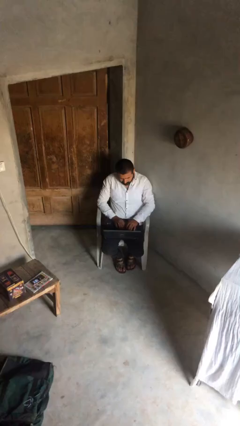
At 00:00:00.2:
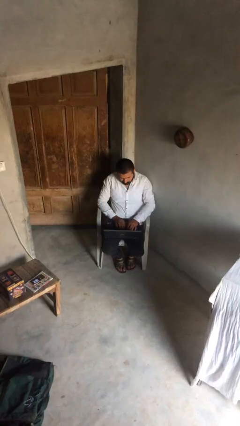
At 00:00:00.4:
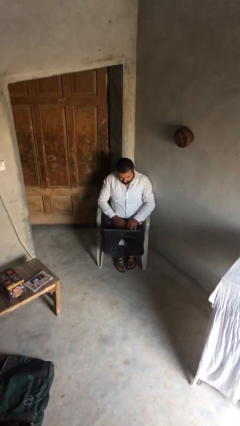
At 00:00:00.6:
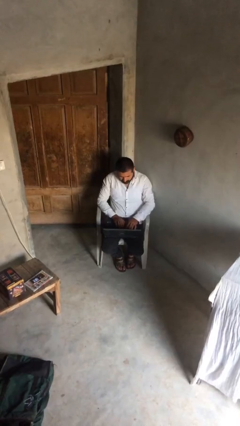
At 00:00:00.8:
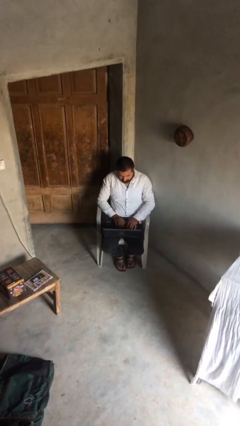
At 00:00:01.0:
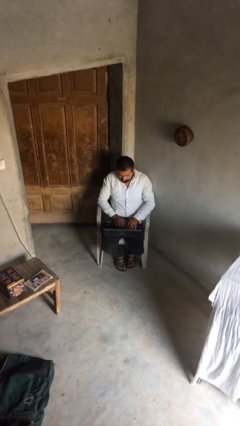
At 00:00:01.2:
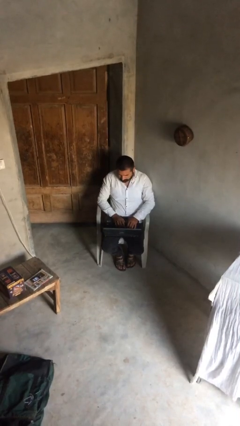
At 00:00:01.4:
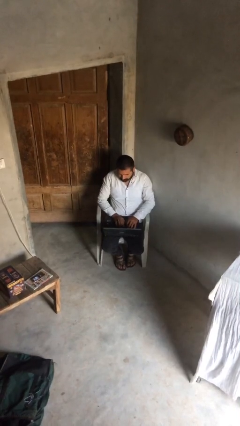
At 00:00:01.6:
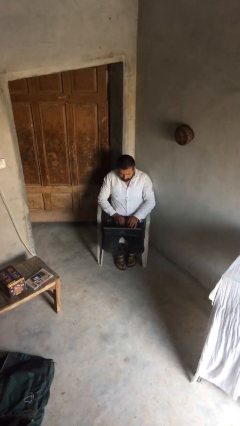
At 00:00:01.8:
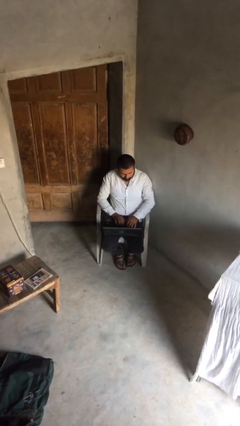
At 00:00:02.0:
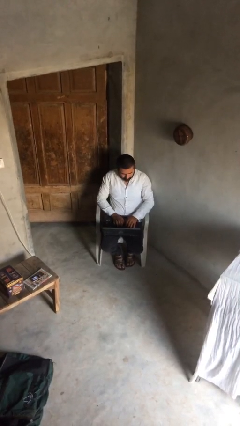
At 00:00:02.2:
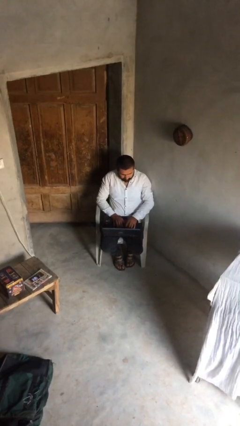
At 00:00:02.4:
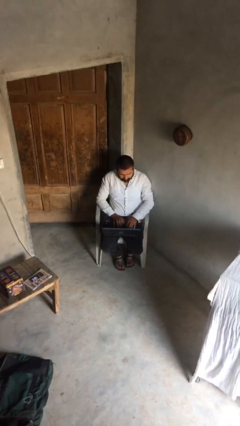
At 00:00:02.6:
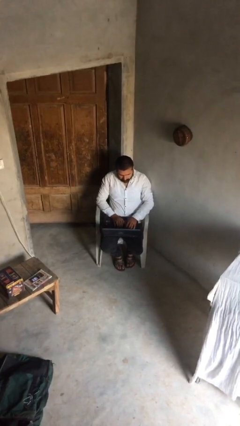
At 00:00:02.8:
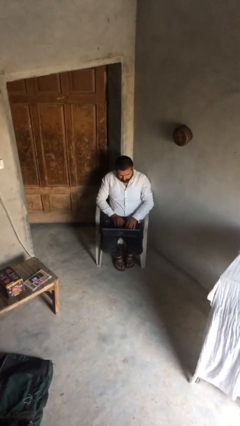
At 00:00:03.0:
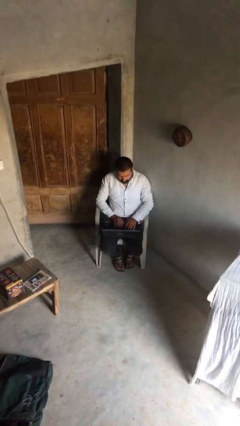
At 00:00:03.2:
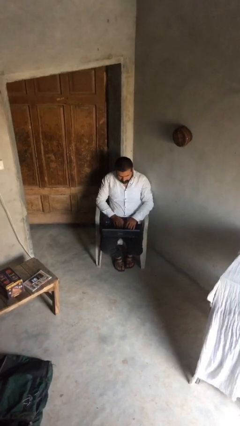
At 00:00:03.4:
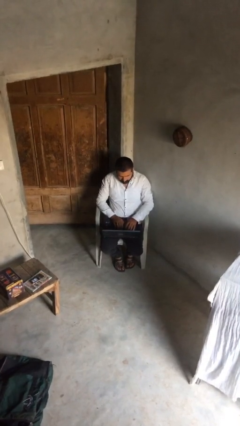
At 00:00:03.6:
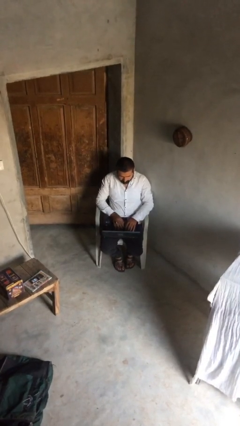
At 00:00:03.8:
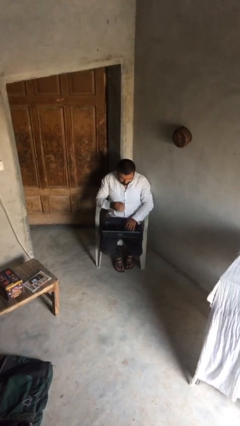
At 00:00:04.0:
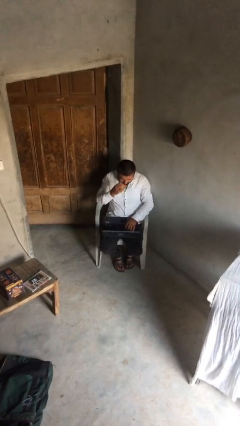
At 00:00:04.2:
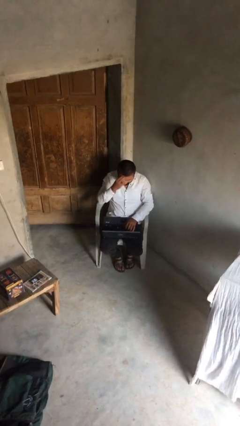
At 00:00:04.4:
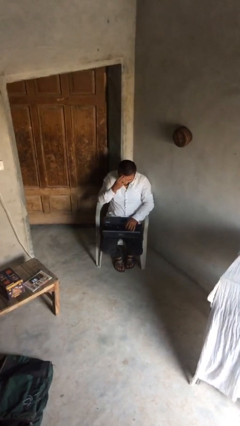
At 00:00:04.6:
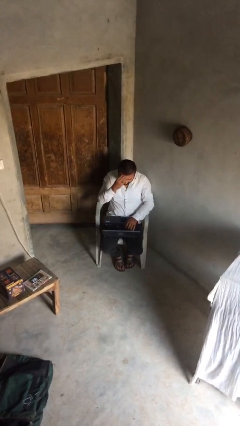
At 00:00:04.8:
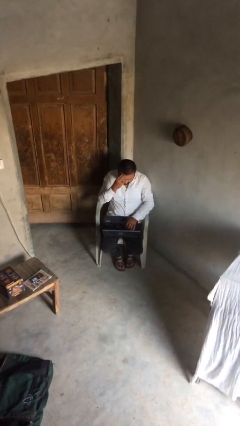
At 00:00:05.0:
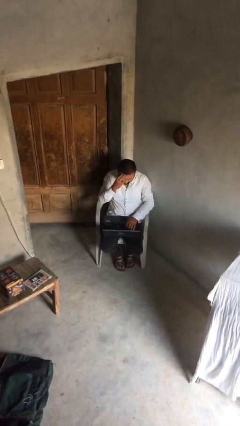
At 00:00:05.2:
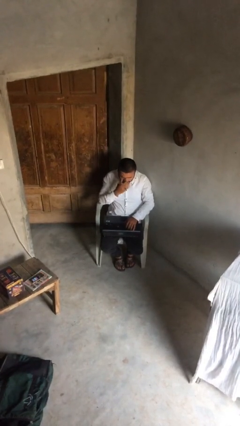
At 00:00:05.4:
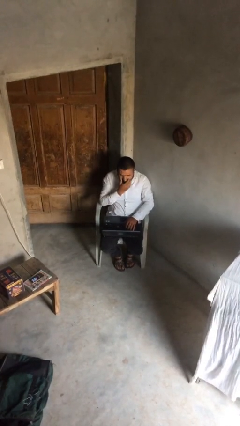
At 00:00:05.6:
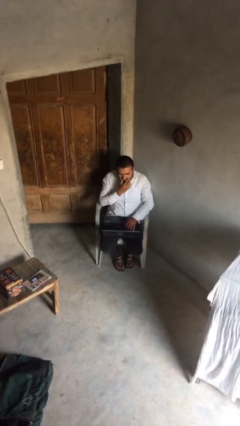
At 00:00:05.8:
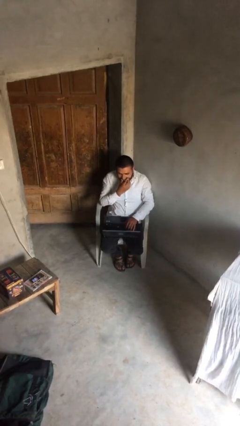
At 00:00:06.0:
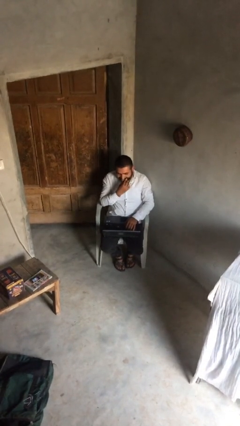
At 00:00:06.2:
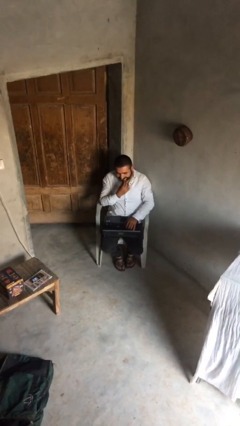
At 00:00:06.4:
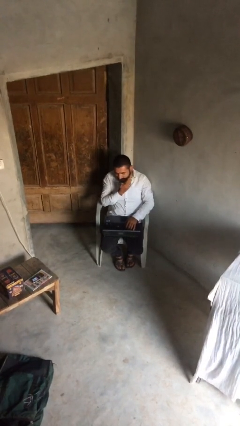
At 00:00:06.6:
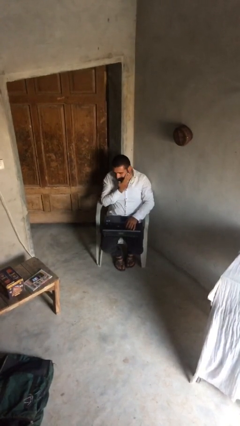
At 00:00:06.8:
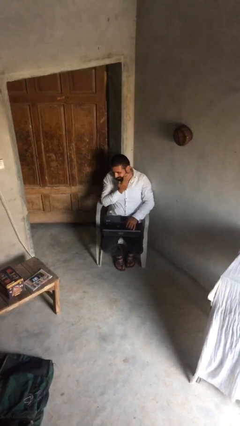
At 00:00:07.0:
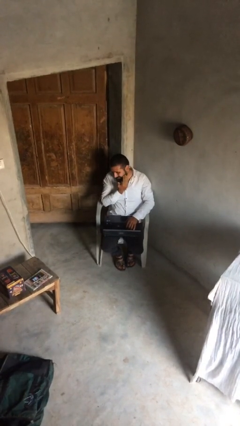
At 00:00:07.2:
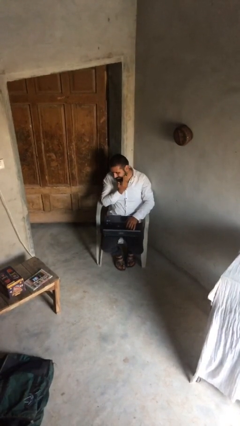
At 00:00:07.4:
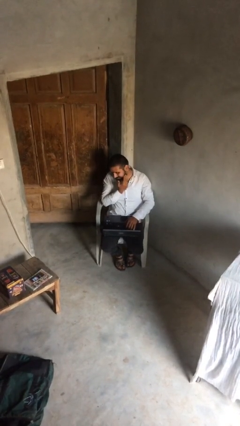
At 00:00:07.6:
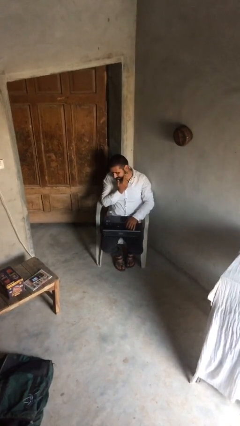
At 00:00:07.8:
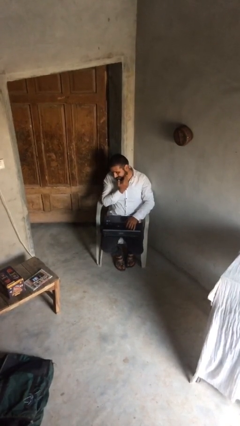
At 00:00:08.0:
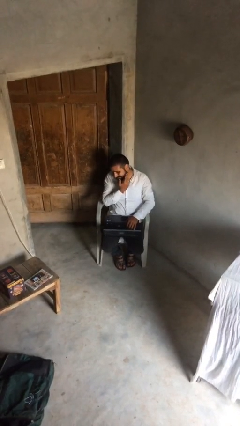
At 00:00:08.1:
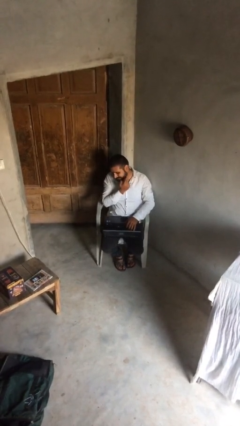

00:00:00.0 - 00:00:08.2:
person interacts with laptop

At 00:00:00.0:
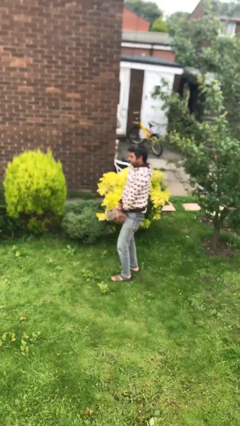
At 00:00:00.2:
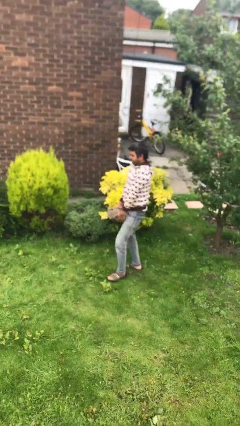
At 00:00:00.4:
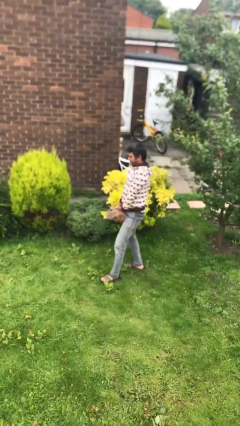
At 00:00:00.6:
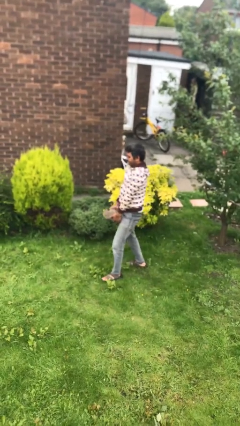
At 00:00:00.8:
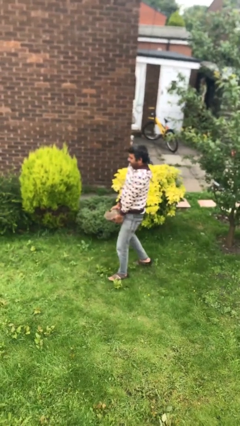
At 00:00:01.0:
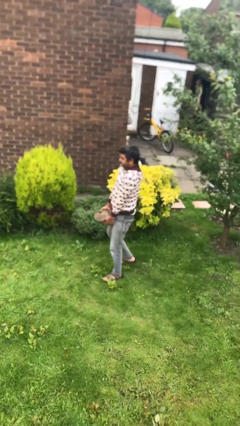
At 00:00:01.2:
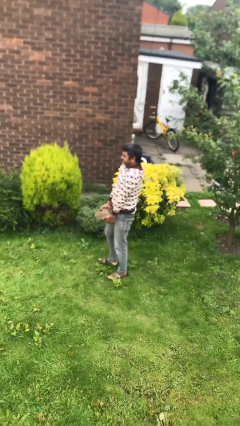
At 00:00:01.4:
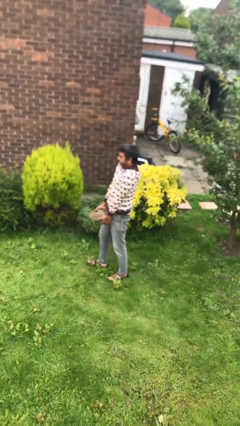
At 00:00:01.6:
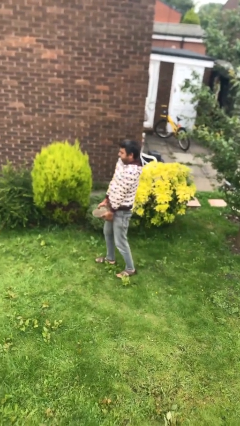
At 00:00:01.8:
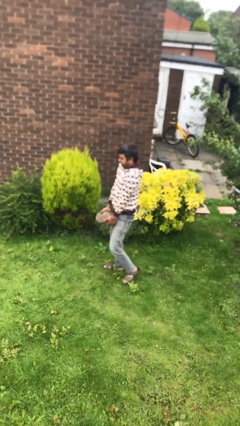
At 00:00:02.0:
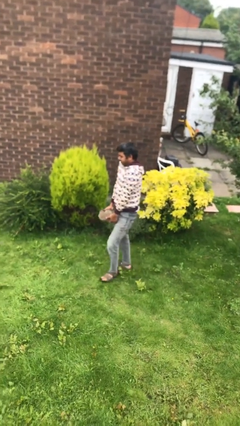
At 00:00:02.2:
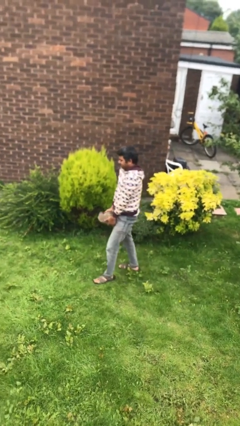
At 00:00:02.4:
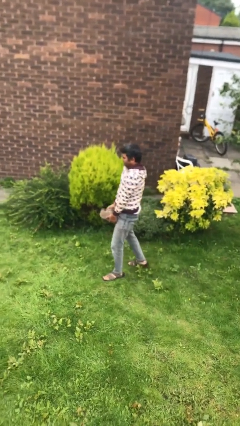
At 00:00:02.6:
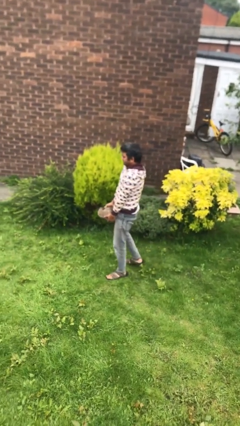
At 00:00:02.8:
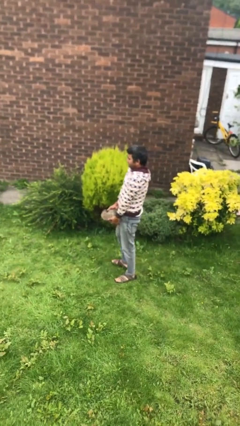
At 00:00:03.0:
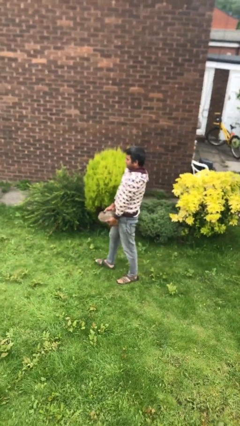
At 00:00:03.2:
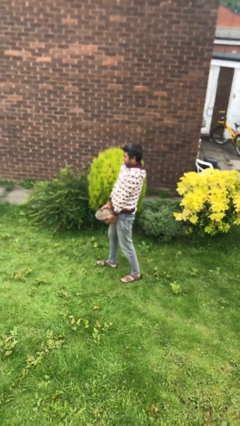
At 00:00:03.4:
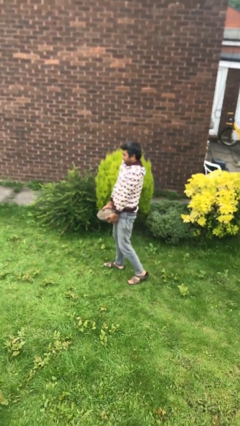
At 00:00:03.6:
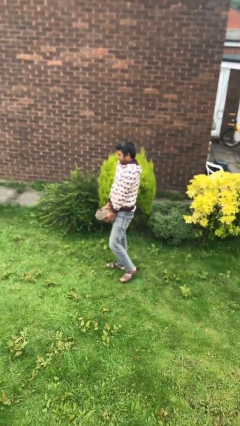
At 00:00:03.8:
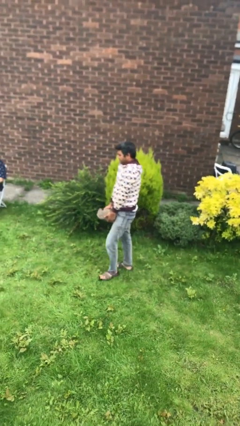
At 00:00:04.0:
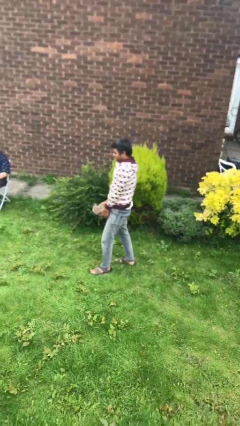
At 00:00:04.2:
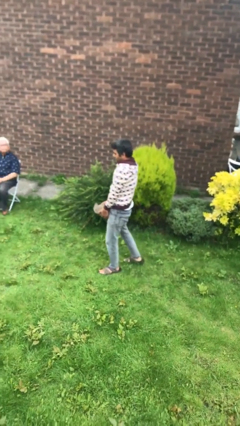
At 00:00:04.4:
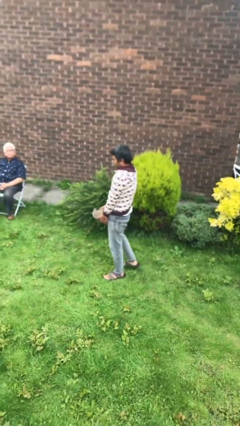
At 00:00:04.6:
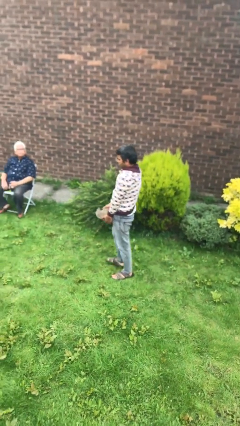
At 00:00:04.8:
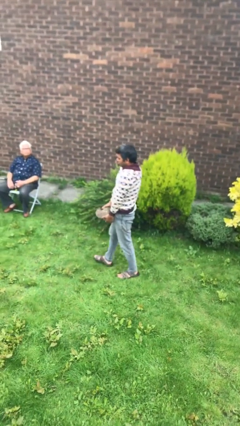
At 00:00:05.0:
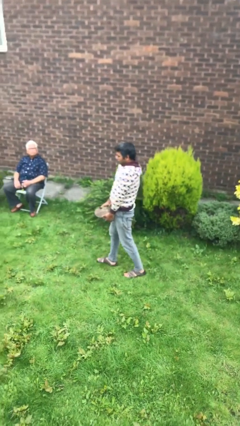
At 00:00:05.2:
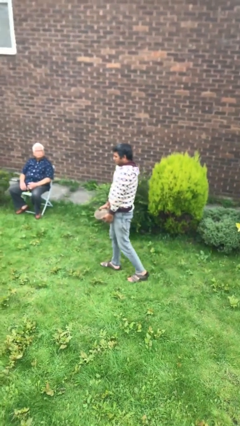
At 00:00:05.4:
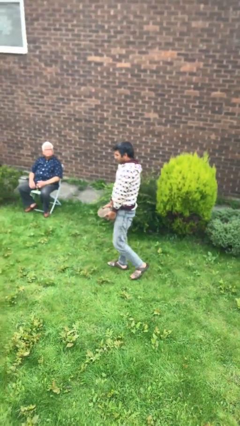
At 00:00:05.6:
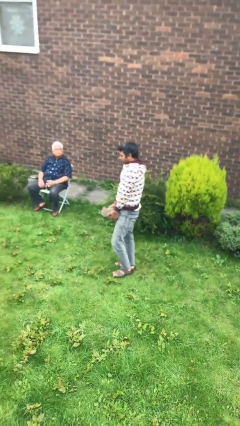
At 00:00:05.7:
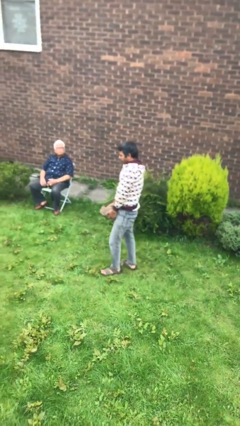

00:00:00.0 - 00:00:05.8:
person carries heavy object

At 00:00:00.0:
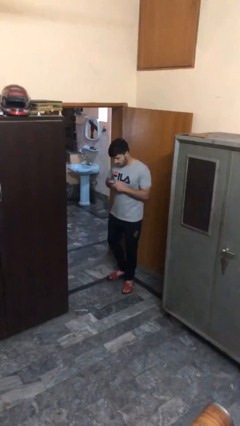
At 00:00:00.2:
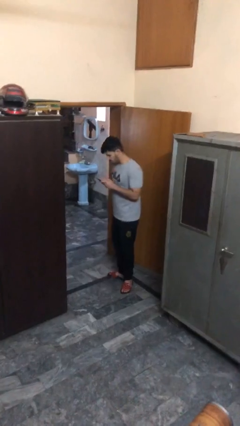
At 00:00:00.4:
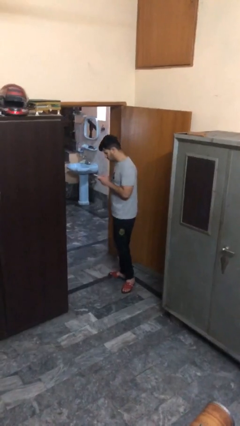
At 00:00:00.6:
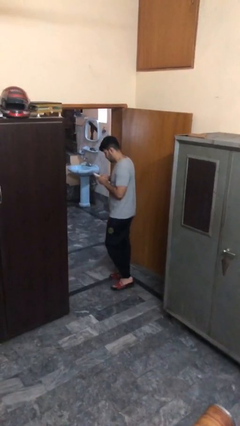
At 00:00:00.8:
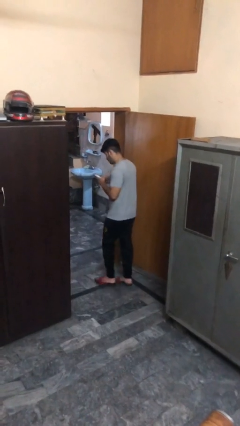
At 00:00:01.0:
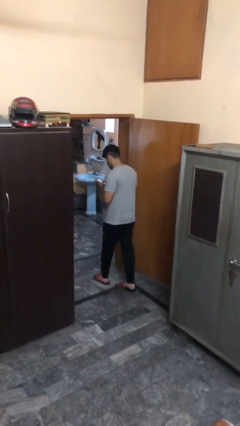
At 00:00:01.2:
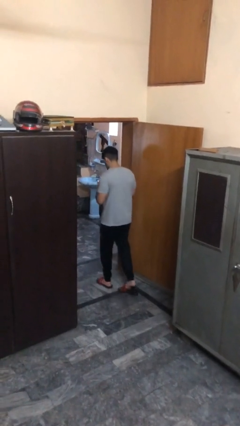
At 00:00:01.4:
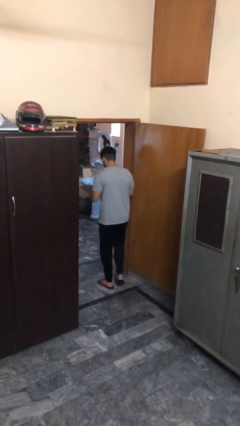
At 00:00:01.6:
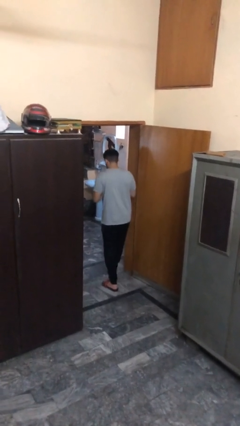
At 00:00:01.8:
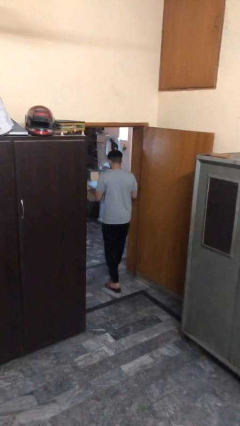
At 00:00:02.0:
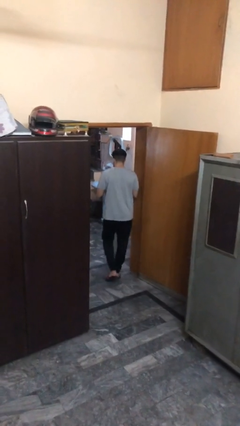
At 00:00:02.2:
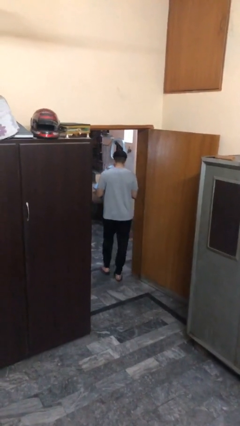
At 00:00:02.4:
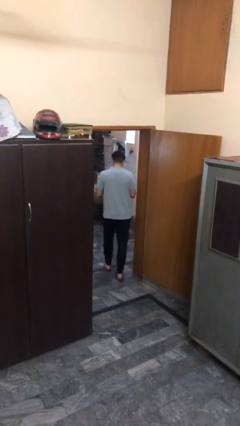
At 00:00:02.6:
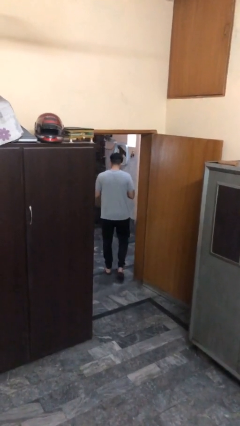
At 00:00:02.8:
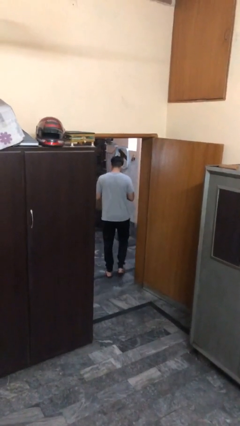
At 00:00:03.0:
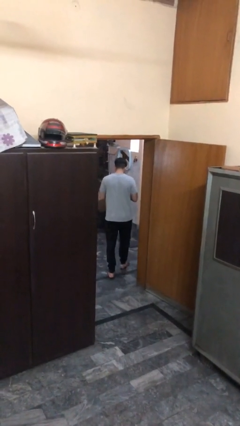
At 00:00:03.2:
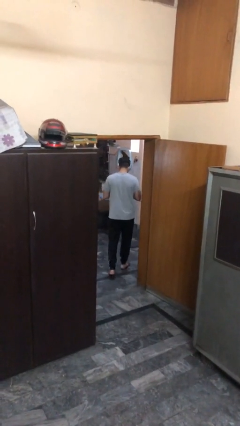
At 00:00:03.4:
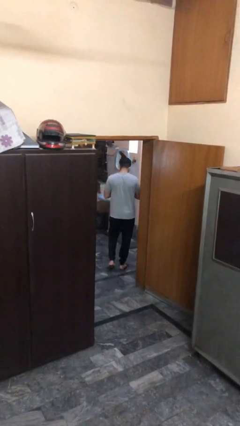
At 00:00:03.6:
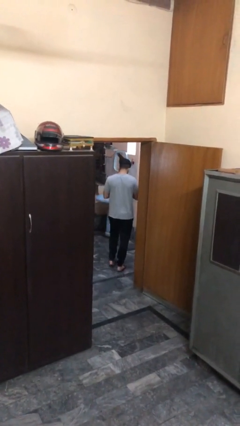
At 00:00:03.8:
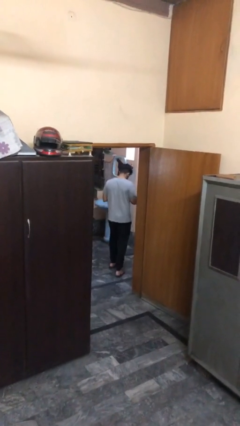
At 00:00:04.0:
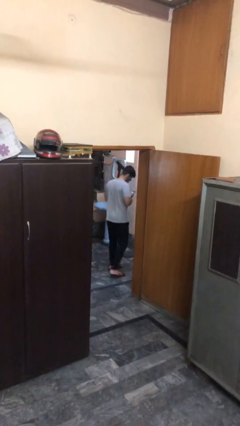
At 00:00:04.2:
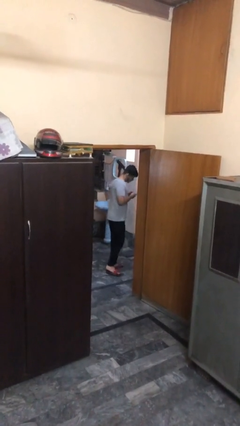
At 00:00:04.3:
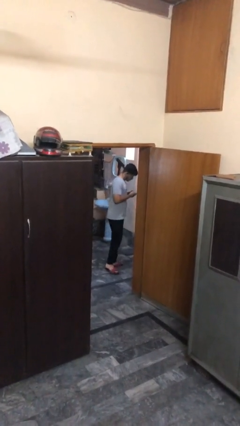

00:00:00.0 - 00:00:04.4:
person exits scene through structure
